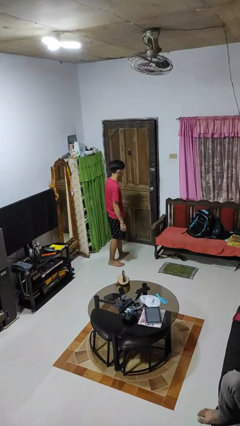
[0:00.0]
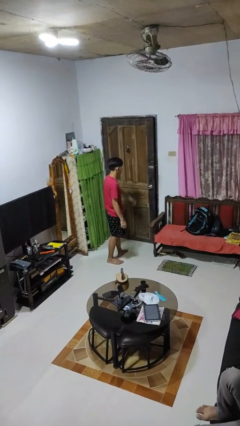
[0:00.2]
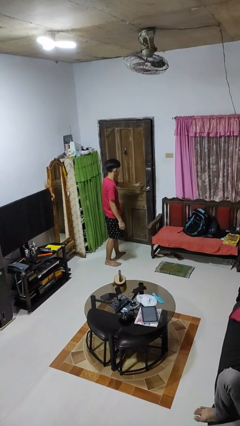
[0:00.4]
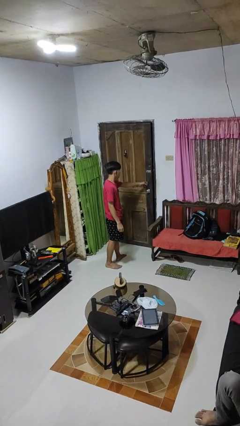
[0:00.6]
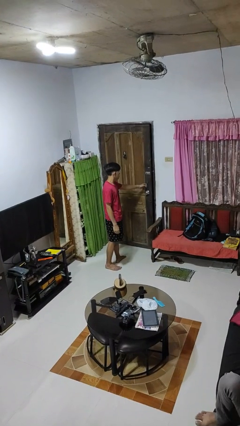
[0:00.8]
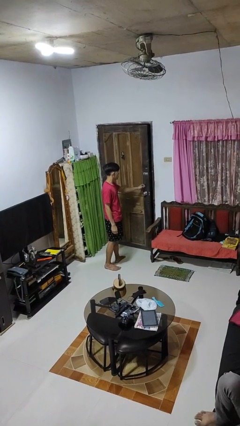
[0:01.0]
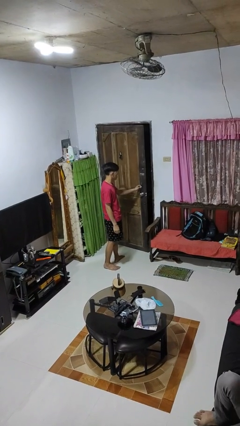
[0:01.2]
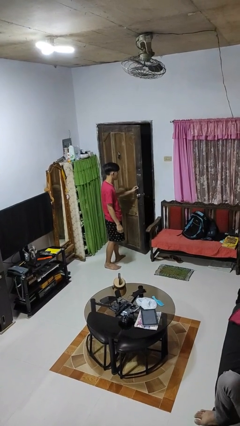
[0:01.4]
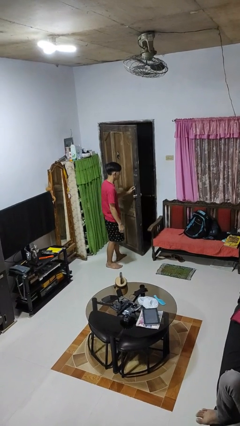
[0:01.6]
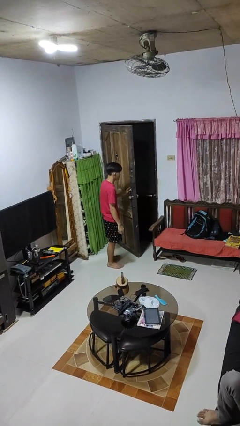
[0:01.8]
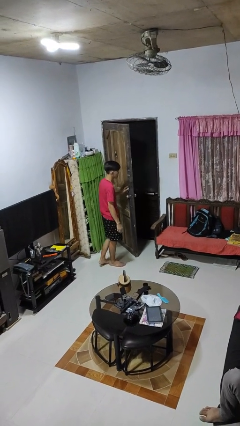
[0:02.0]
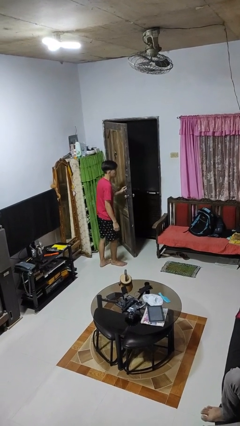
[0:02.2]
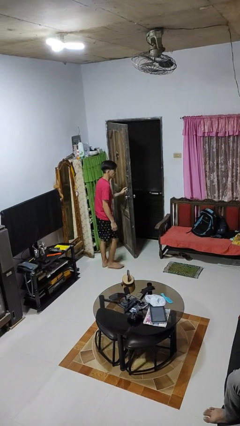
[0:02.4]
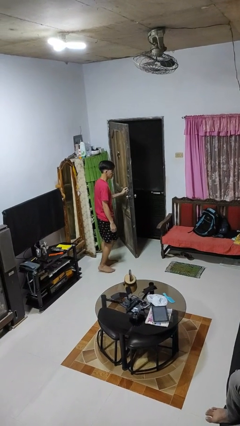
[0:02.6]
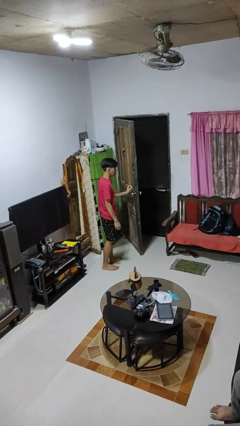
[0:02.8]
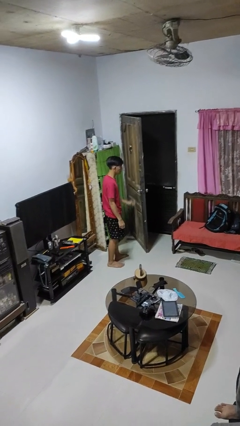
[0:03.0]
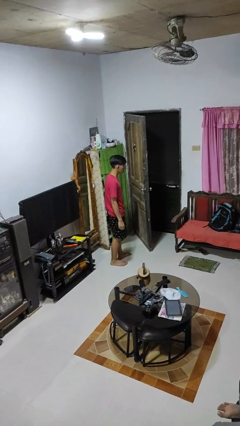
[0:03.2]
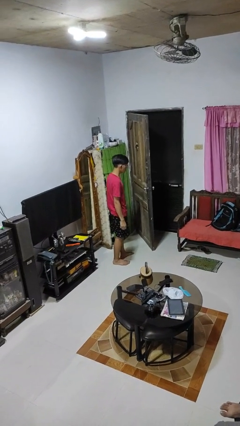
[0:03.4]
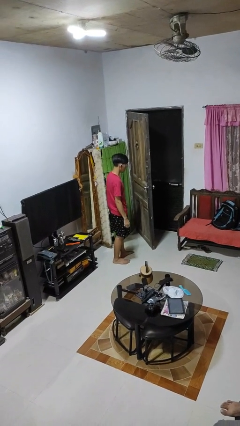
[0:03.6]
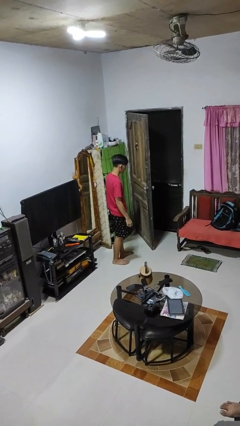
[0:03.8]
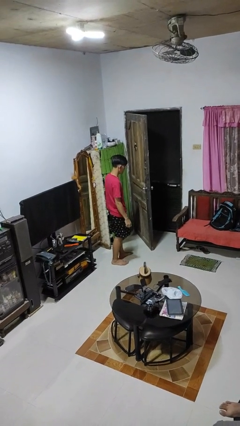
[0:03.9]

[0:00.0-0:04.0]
person opens facility door

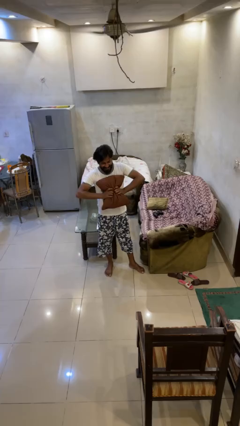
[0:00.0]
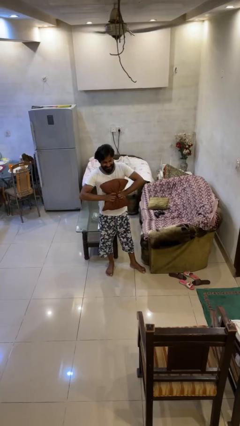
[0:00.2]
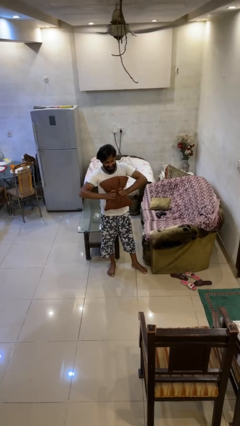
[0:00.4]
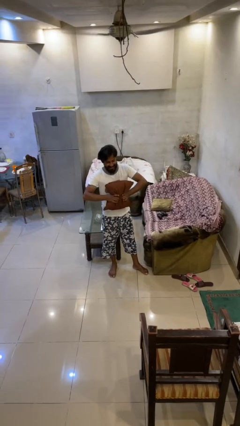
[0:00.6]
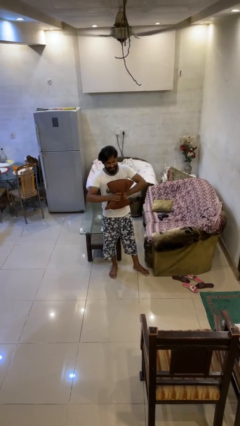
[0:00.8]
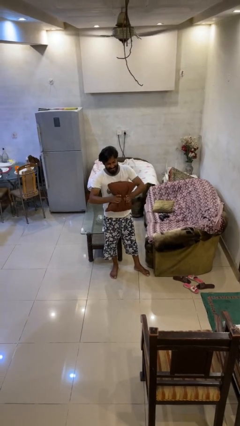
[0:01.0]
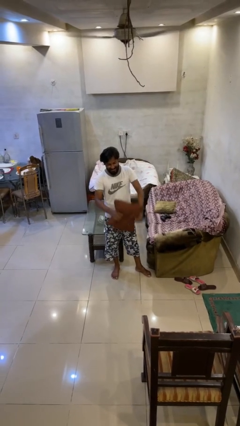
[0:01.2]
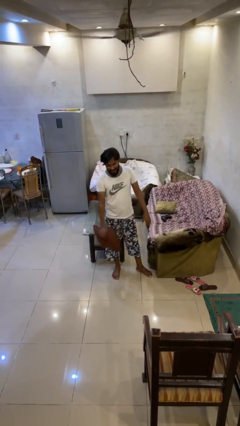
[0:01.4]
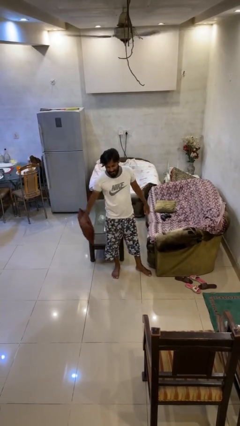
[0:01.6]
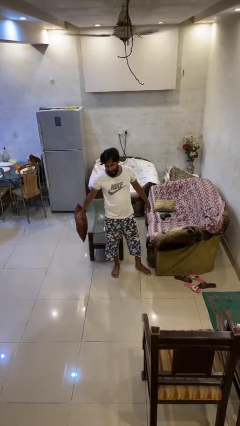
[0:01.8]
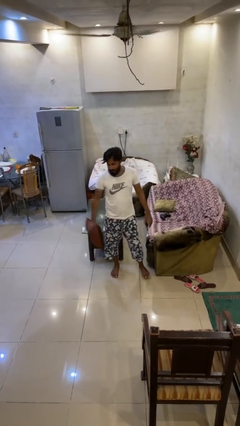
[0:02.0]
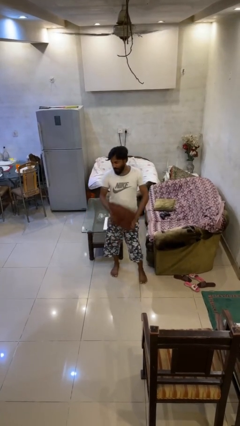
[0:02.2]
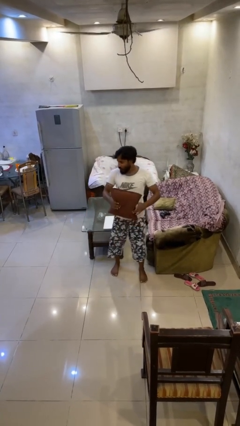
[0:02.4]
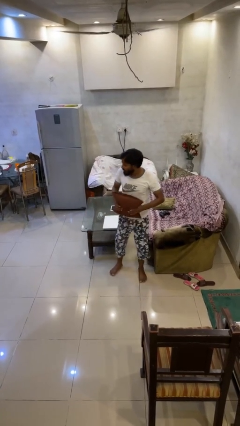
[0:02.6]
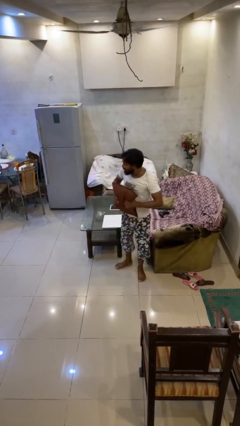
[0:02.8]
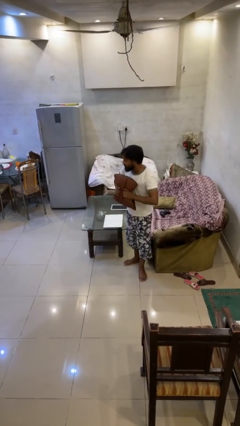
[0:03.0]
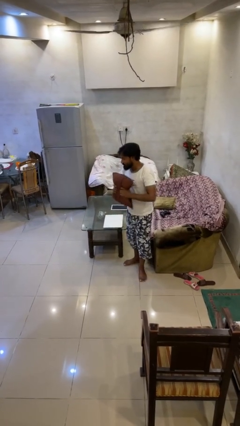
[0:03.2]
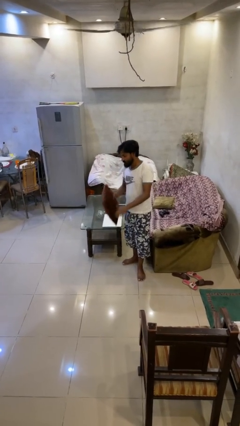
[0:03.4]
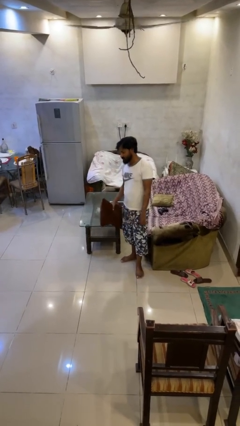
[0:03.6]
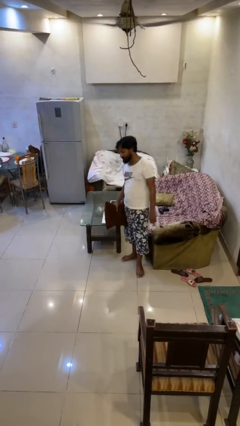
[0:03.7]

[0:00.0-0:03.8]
person squeezes object

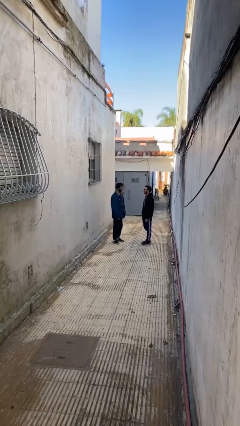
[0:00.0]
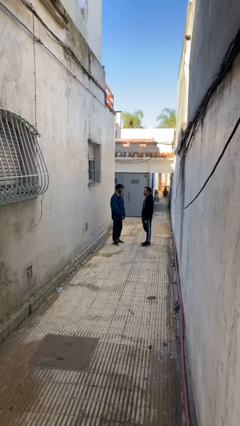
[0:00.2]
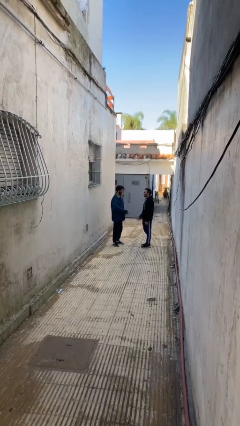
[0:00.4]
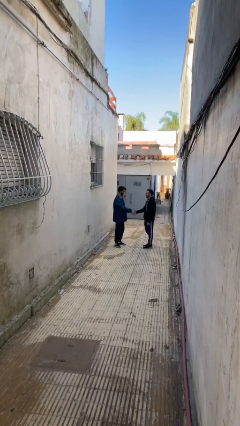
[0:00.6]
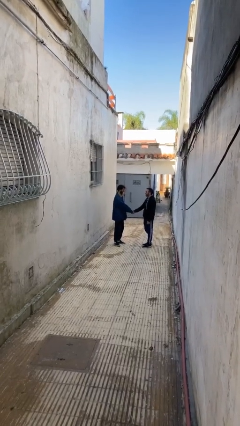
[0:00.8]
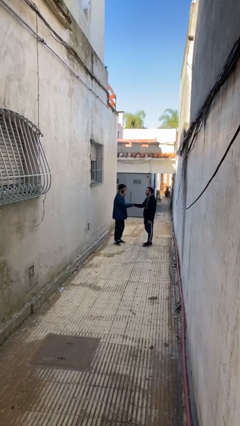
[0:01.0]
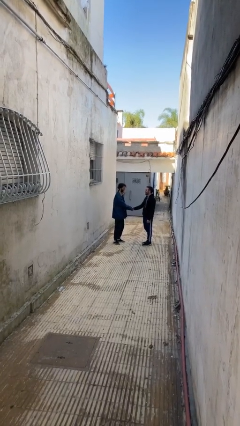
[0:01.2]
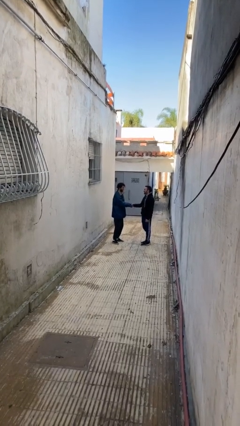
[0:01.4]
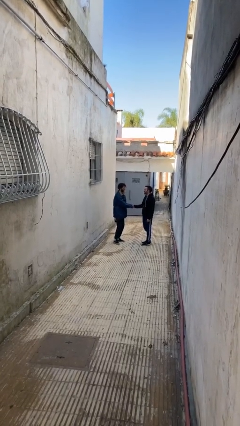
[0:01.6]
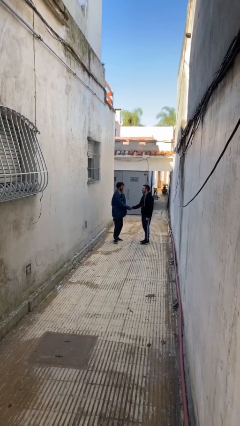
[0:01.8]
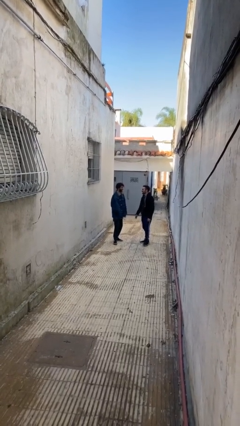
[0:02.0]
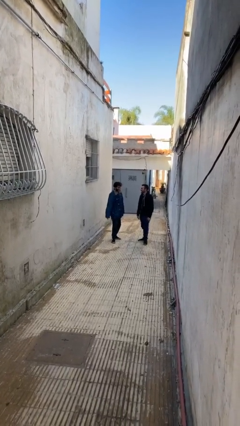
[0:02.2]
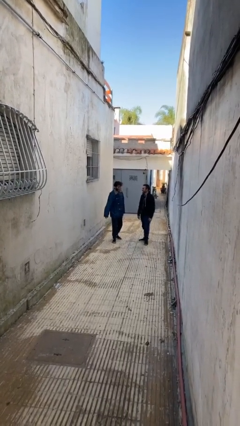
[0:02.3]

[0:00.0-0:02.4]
person shakes hand

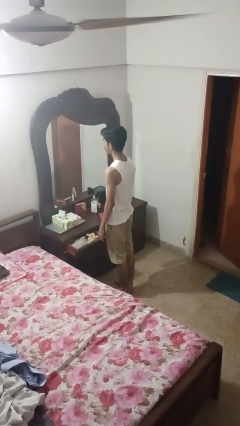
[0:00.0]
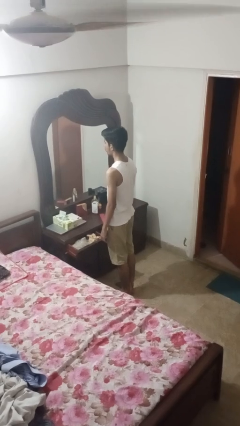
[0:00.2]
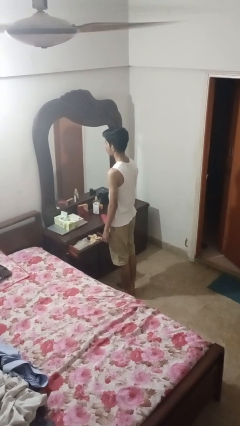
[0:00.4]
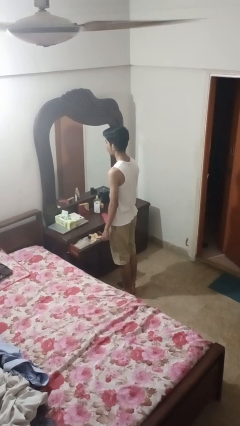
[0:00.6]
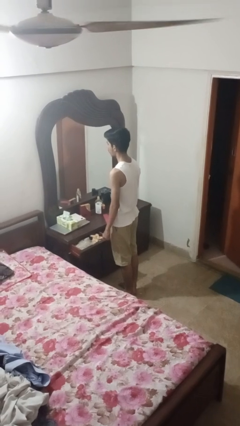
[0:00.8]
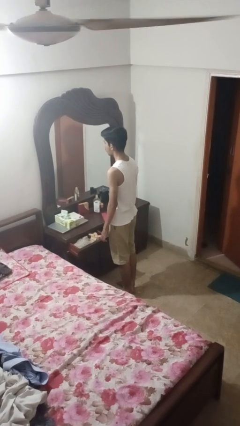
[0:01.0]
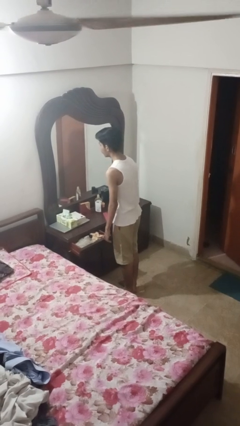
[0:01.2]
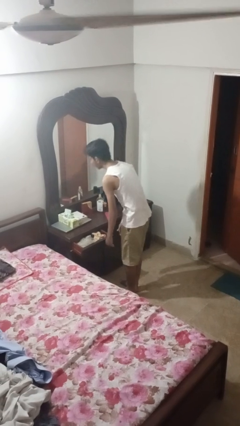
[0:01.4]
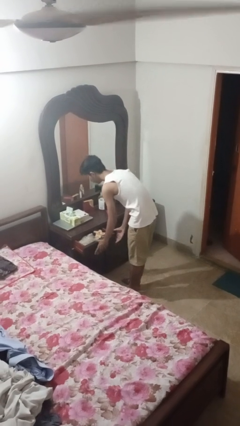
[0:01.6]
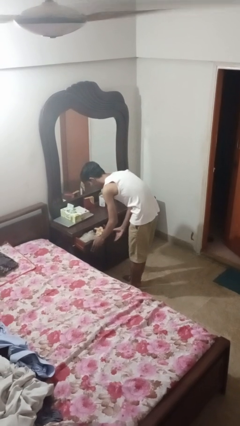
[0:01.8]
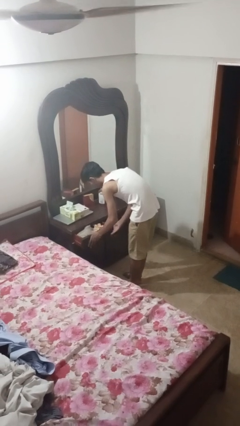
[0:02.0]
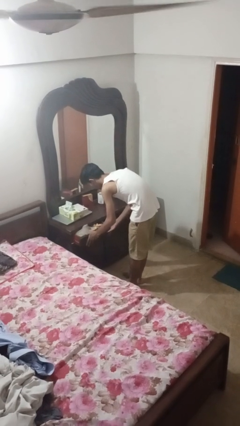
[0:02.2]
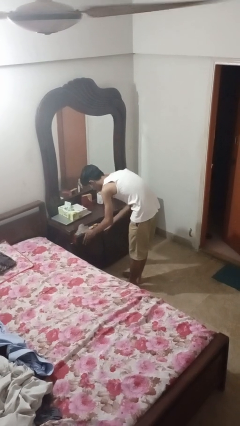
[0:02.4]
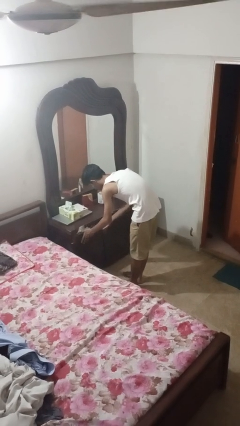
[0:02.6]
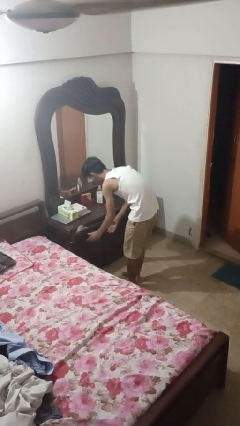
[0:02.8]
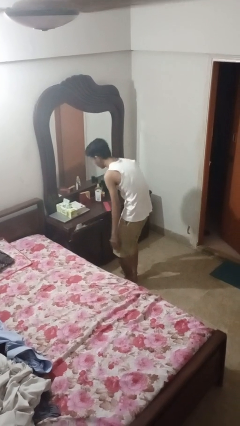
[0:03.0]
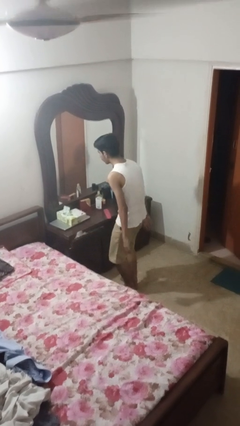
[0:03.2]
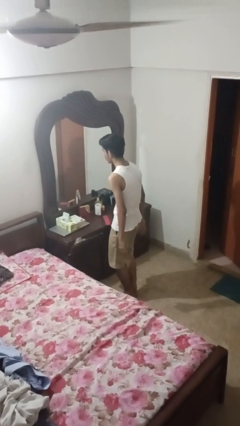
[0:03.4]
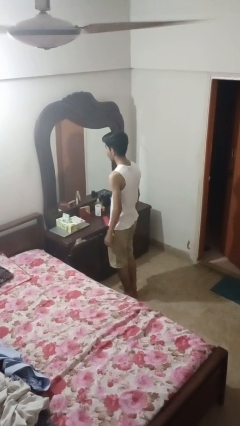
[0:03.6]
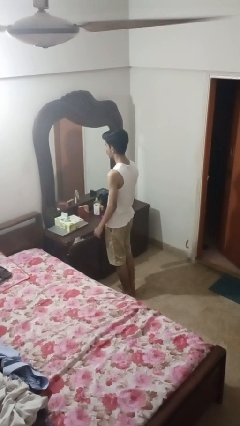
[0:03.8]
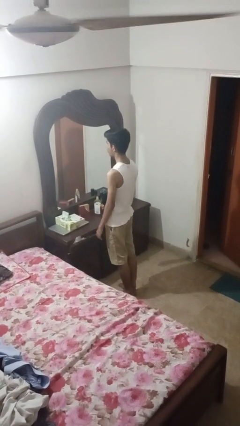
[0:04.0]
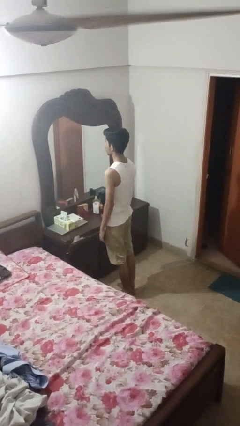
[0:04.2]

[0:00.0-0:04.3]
person closes dresser drawer

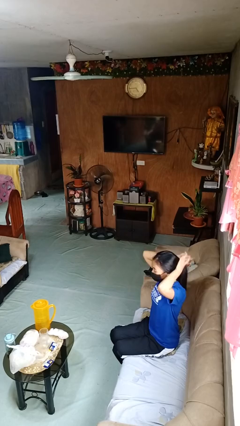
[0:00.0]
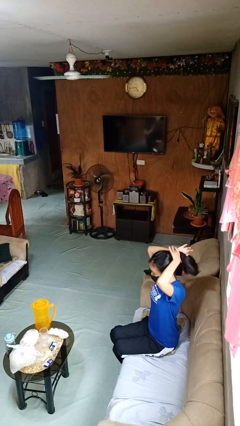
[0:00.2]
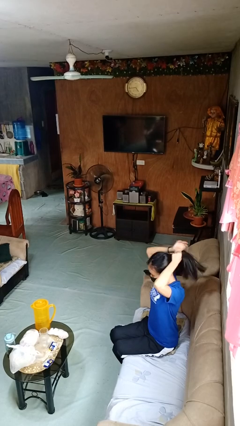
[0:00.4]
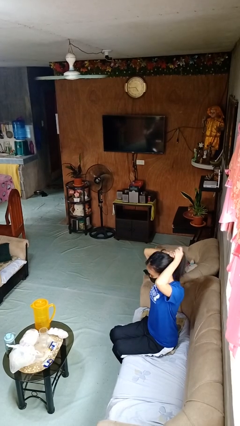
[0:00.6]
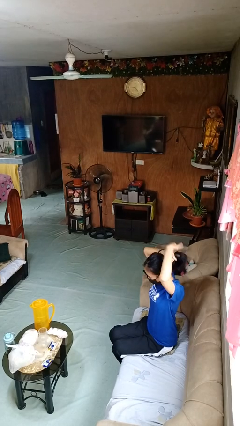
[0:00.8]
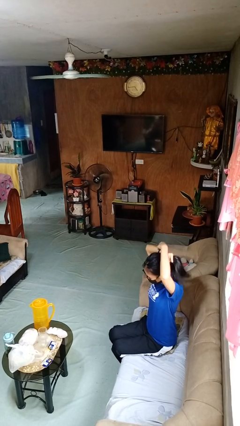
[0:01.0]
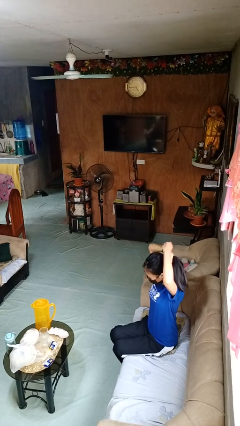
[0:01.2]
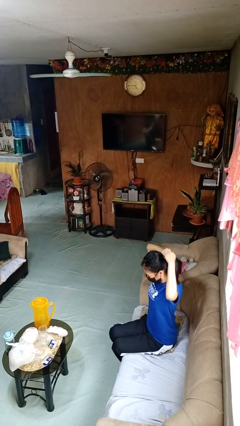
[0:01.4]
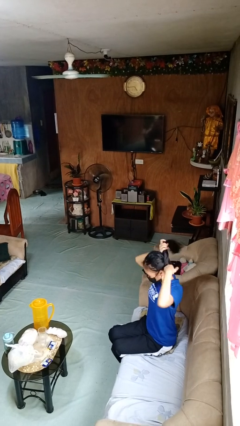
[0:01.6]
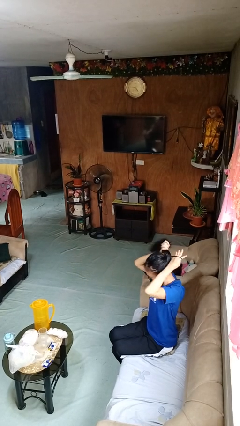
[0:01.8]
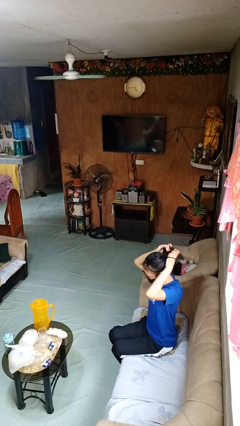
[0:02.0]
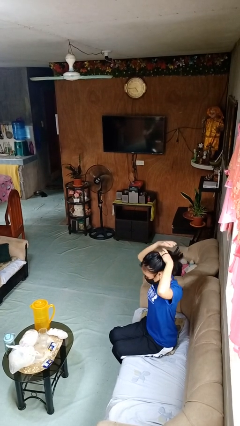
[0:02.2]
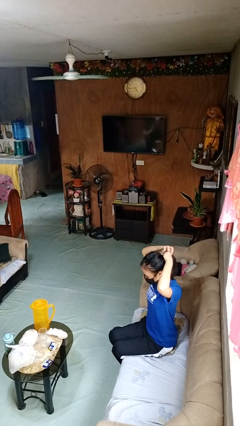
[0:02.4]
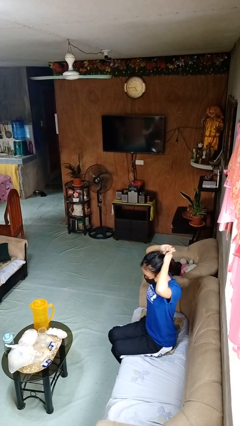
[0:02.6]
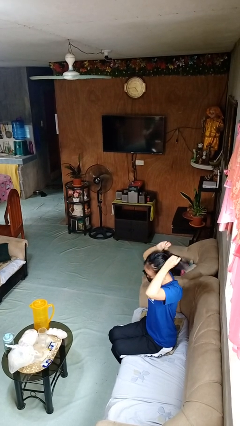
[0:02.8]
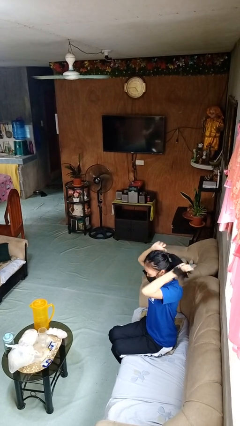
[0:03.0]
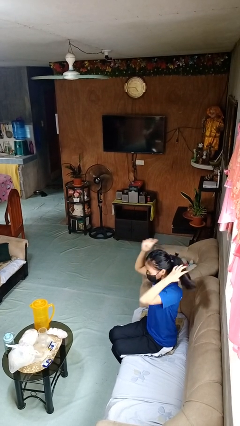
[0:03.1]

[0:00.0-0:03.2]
person puts hair in ponytail
